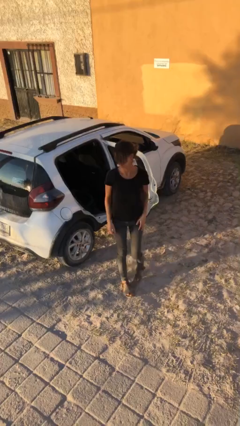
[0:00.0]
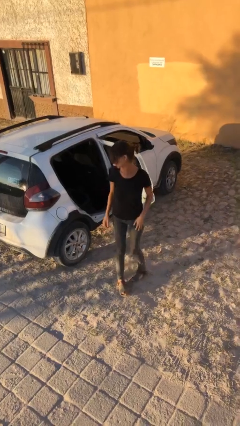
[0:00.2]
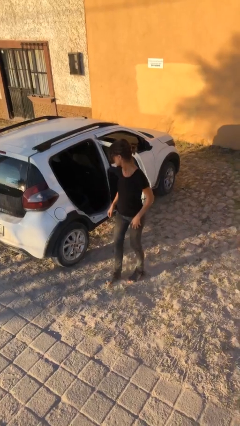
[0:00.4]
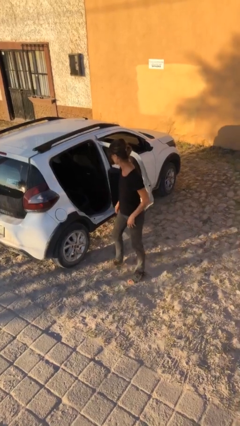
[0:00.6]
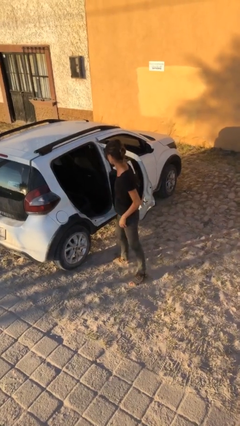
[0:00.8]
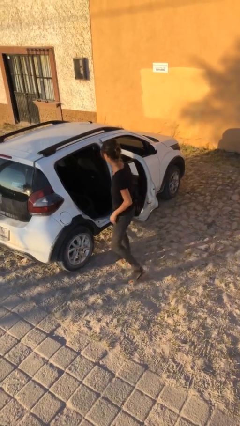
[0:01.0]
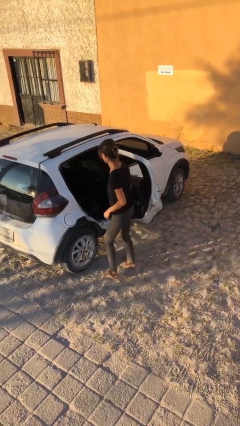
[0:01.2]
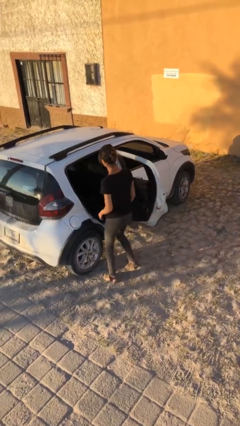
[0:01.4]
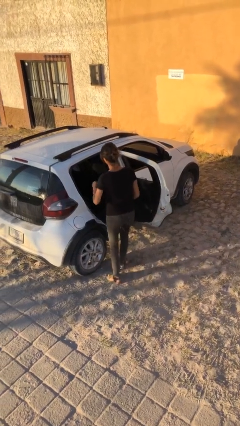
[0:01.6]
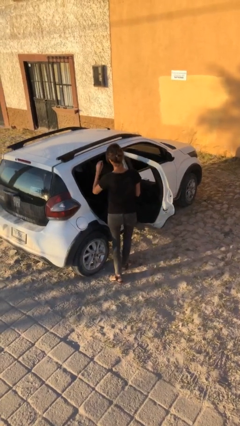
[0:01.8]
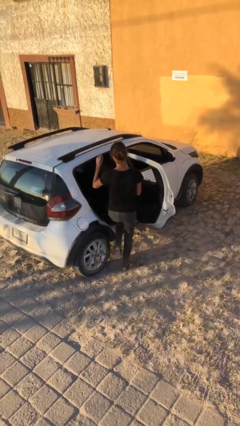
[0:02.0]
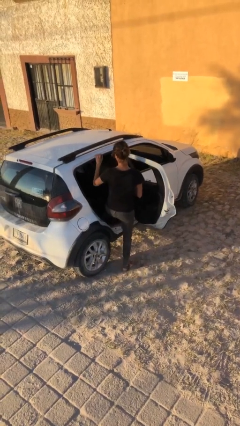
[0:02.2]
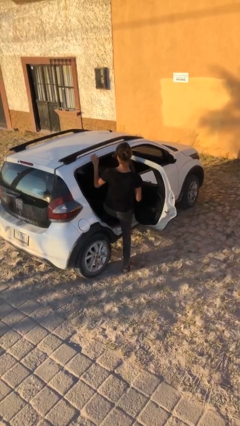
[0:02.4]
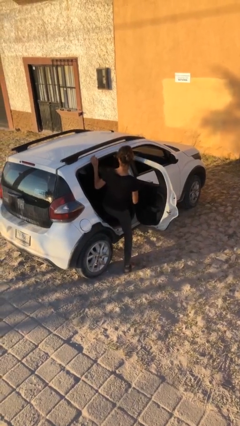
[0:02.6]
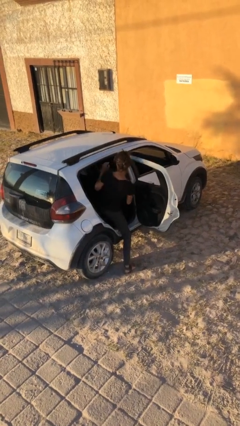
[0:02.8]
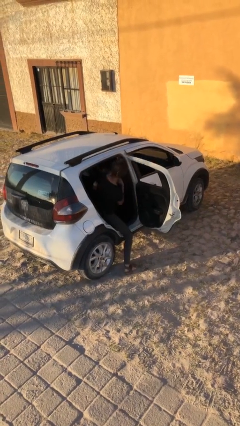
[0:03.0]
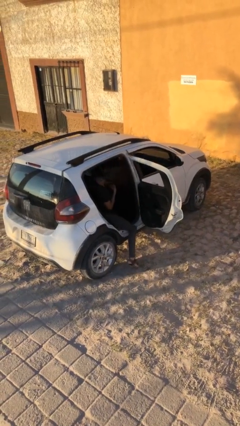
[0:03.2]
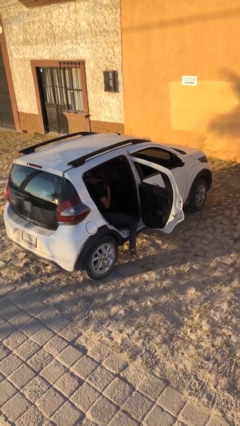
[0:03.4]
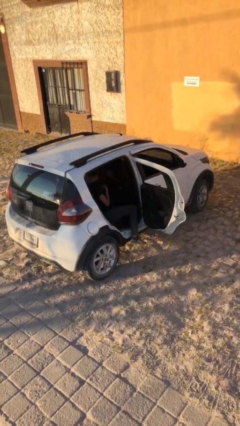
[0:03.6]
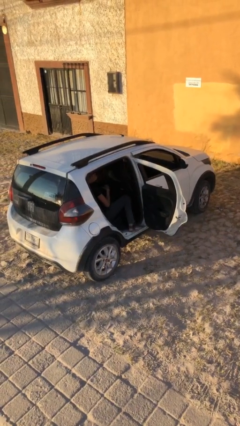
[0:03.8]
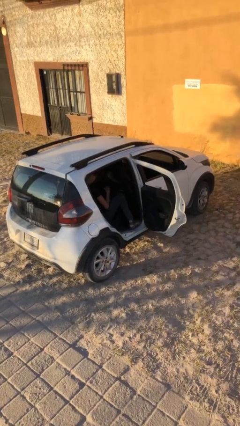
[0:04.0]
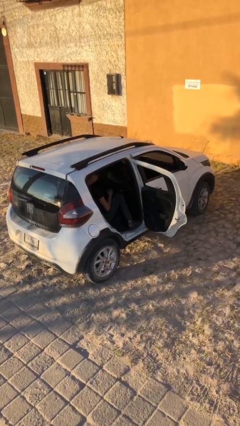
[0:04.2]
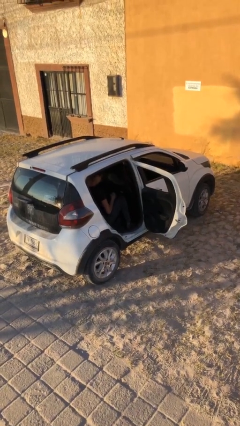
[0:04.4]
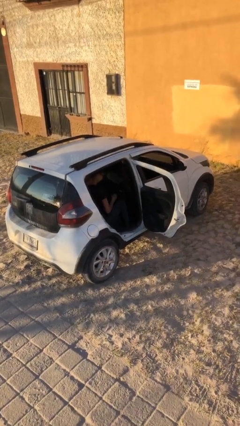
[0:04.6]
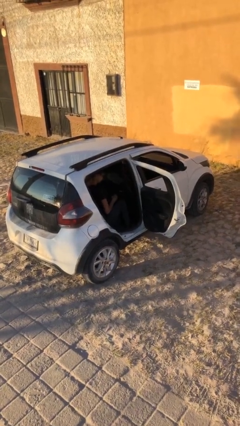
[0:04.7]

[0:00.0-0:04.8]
person enters car

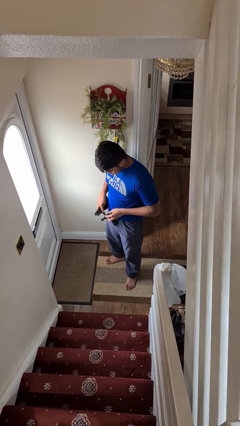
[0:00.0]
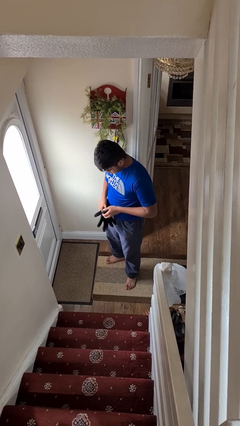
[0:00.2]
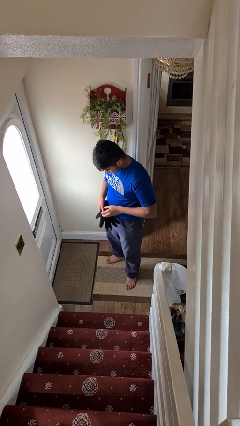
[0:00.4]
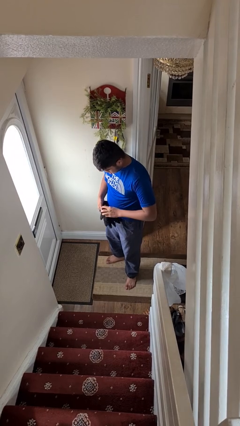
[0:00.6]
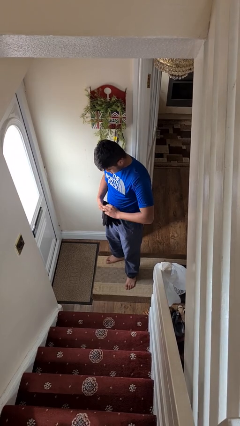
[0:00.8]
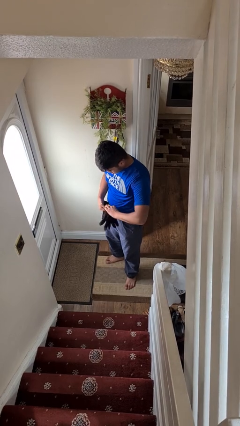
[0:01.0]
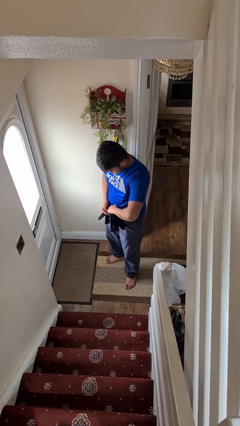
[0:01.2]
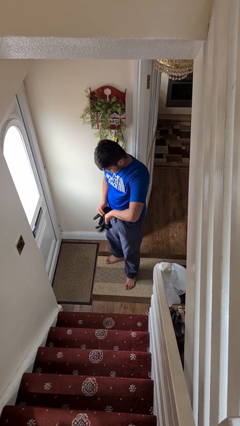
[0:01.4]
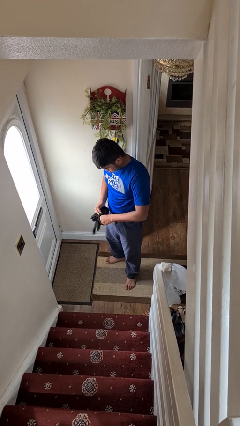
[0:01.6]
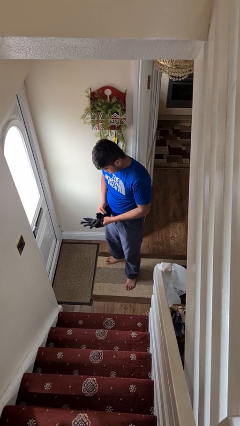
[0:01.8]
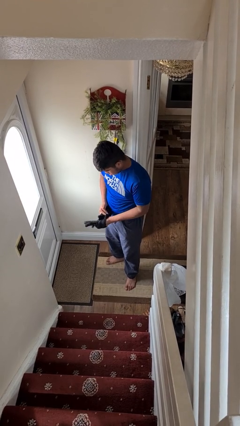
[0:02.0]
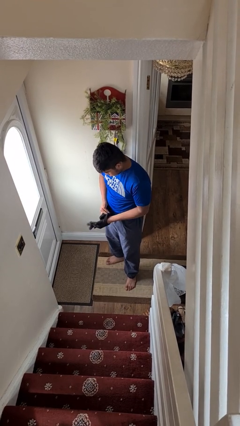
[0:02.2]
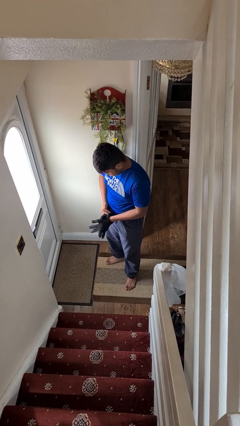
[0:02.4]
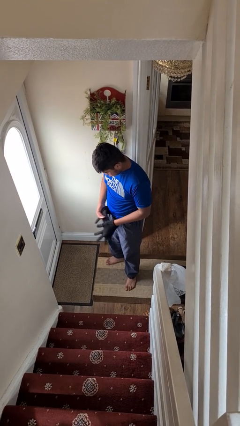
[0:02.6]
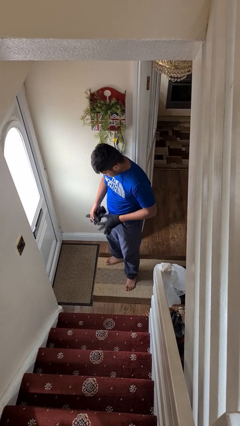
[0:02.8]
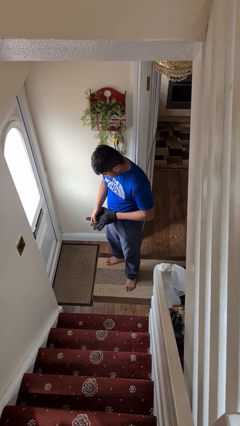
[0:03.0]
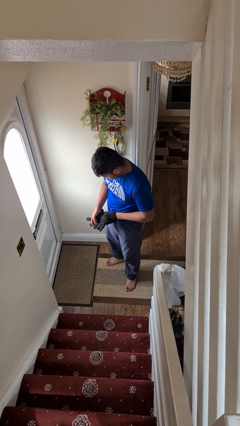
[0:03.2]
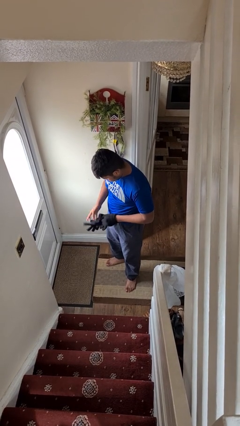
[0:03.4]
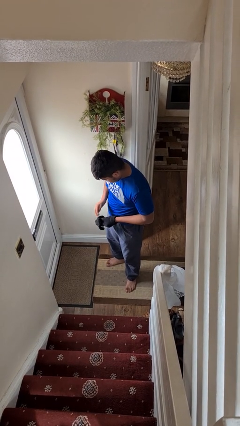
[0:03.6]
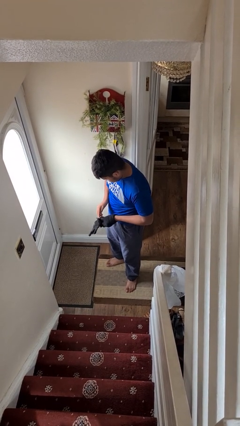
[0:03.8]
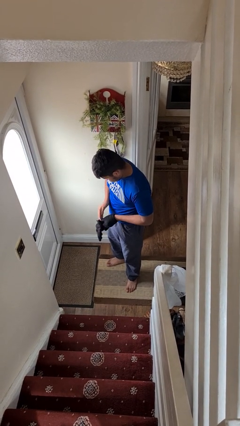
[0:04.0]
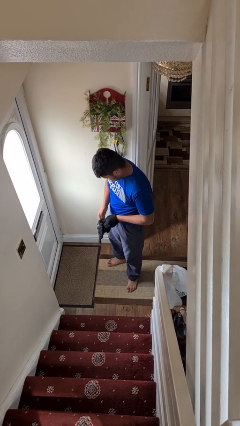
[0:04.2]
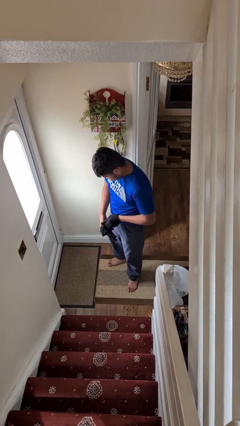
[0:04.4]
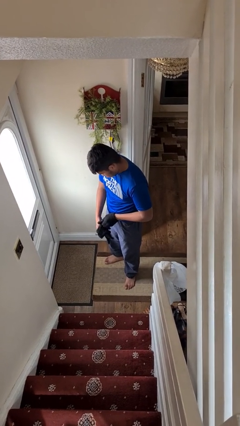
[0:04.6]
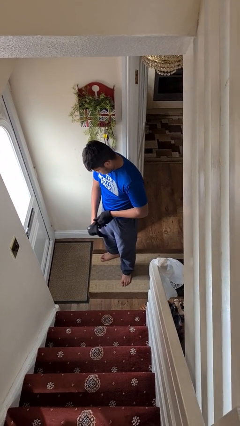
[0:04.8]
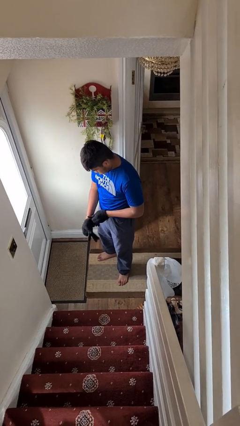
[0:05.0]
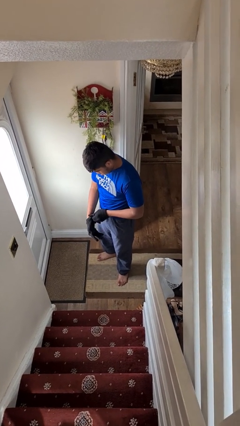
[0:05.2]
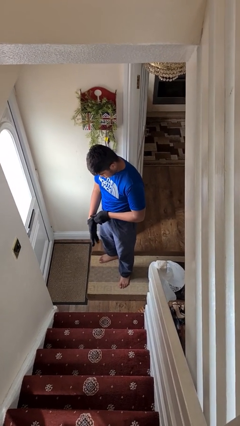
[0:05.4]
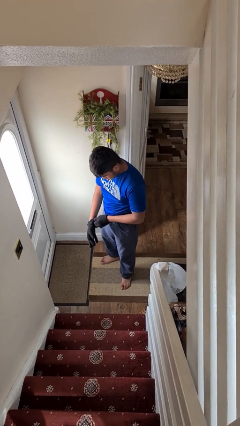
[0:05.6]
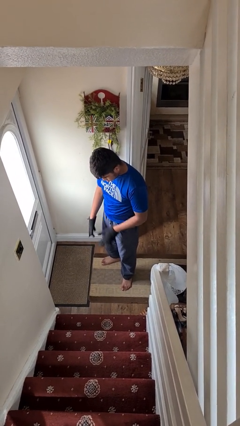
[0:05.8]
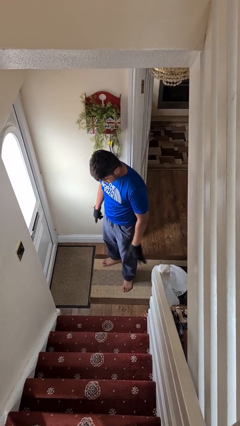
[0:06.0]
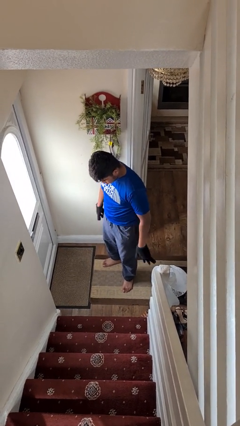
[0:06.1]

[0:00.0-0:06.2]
person puts on gloves

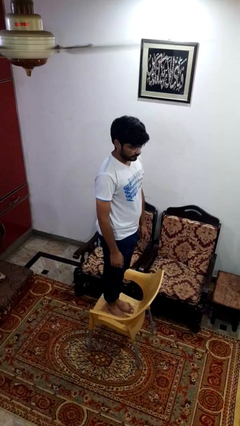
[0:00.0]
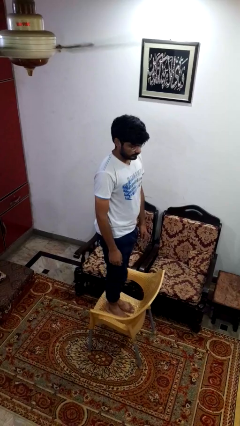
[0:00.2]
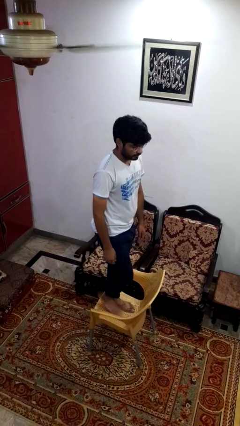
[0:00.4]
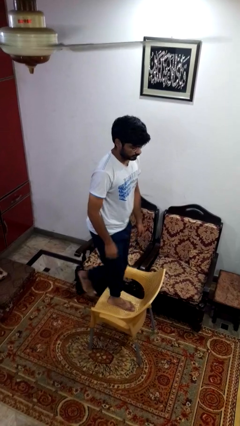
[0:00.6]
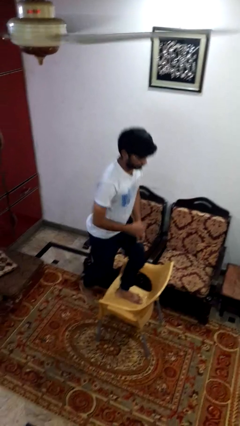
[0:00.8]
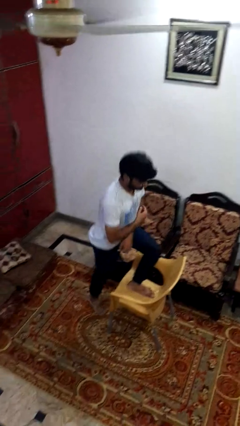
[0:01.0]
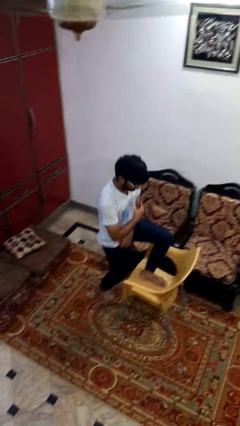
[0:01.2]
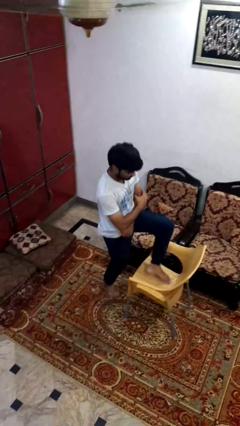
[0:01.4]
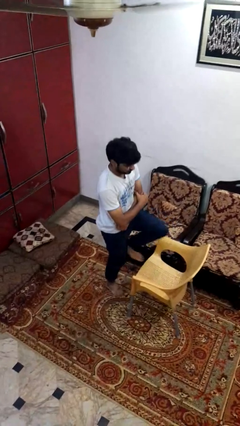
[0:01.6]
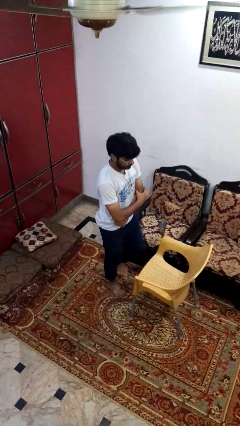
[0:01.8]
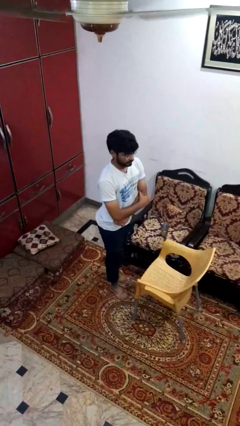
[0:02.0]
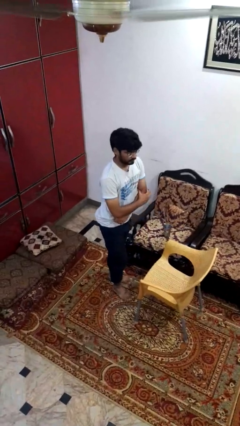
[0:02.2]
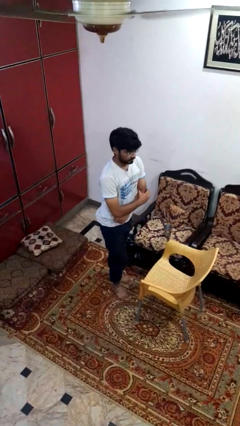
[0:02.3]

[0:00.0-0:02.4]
person climbs off chair

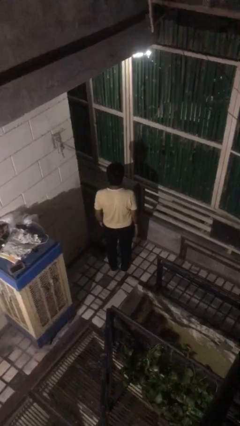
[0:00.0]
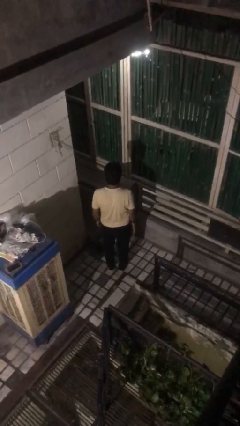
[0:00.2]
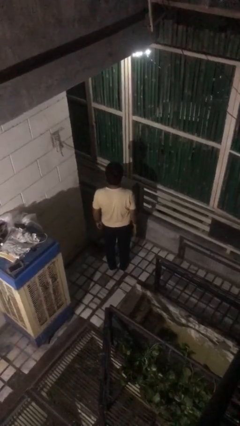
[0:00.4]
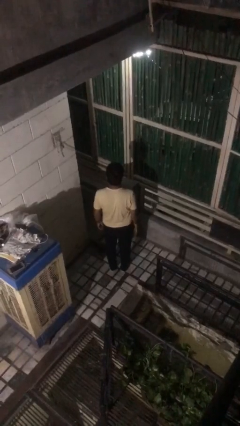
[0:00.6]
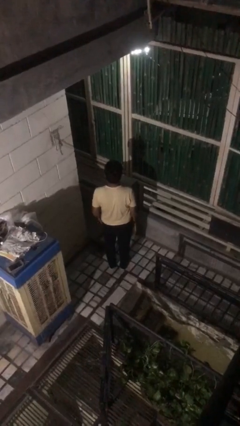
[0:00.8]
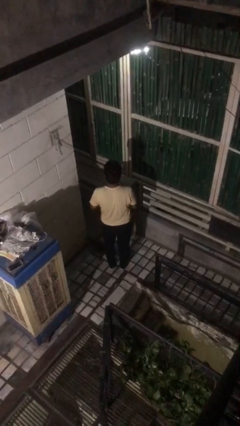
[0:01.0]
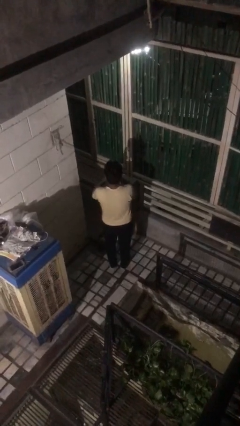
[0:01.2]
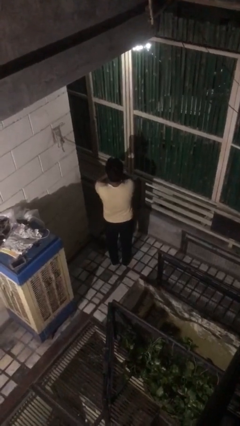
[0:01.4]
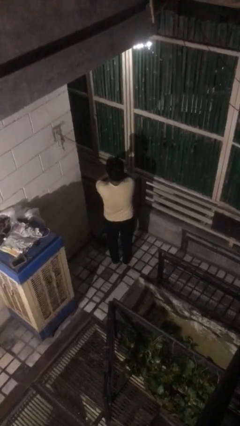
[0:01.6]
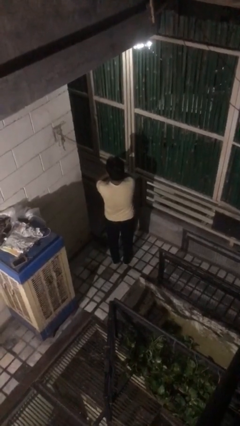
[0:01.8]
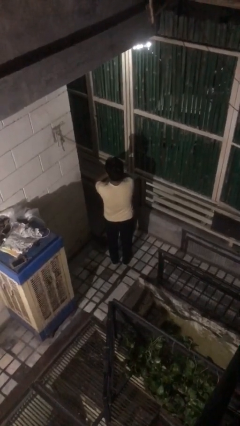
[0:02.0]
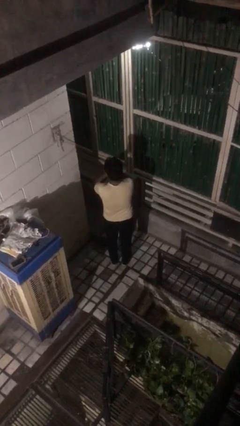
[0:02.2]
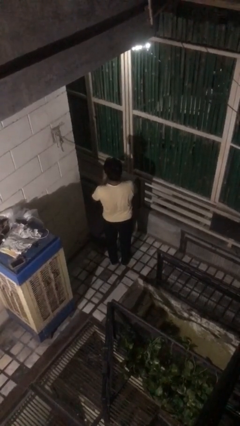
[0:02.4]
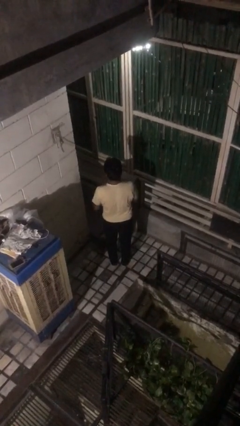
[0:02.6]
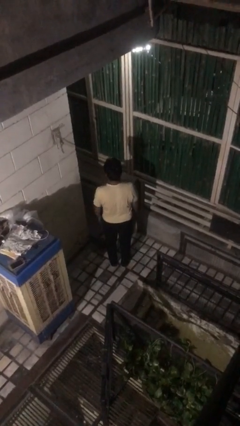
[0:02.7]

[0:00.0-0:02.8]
person covers face with hands

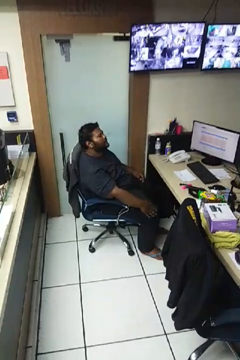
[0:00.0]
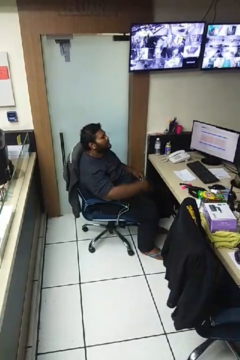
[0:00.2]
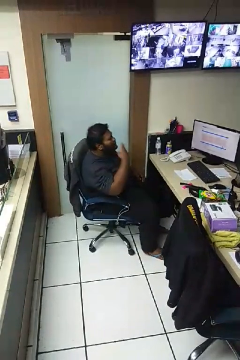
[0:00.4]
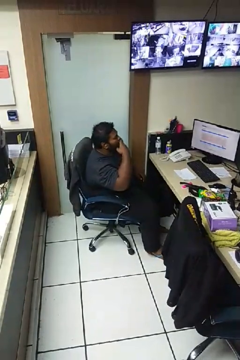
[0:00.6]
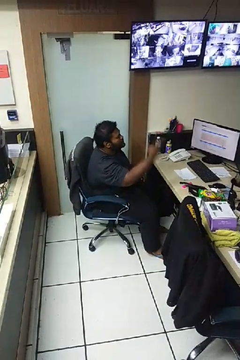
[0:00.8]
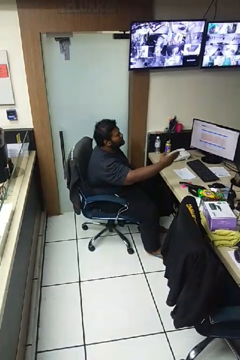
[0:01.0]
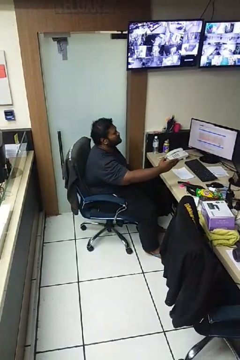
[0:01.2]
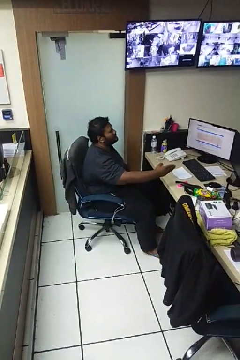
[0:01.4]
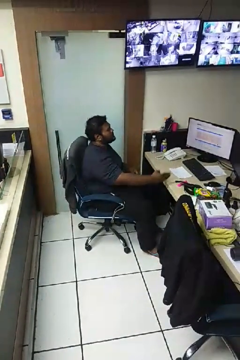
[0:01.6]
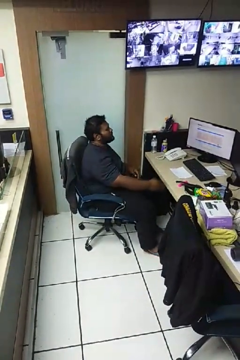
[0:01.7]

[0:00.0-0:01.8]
person gestures blow kiss

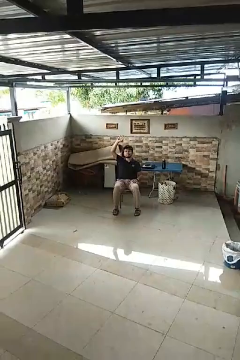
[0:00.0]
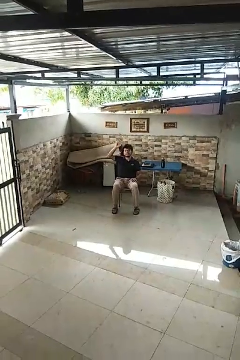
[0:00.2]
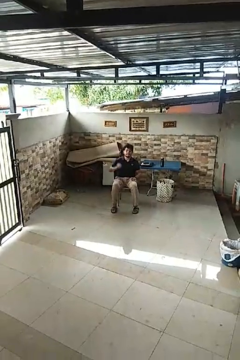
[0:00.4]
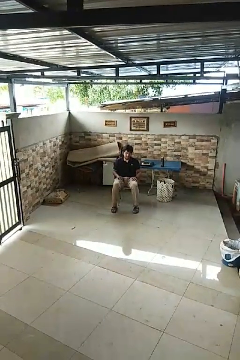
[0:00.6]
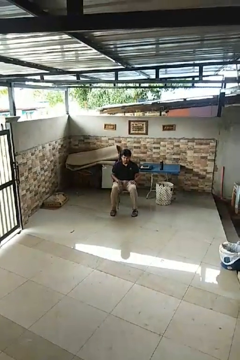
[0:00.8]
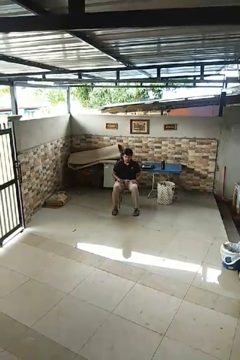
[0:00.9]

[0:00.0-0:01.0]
person gestures lower hand
